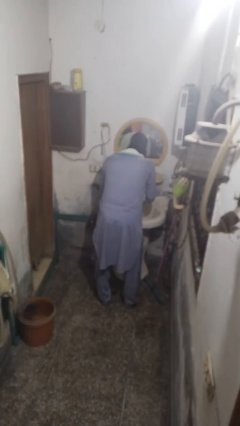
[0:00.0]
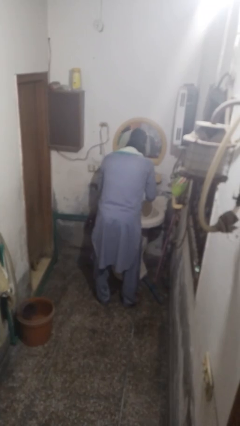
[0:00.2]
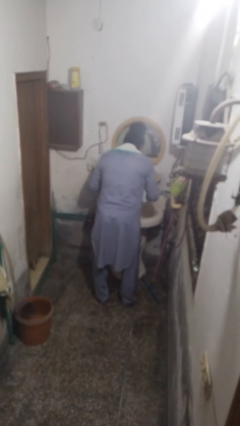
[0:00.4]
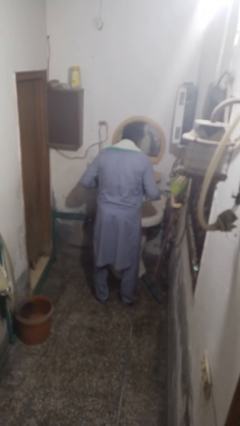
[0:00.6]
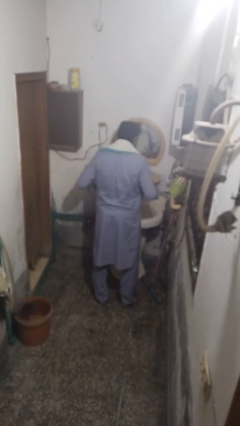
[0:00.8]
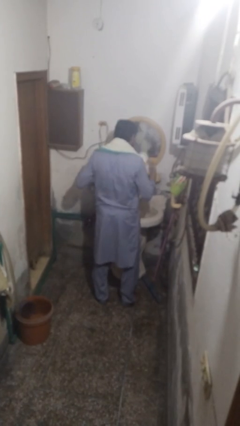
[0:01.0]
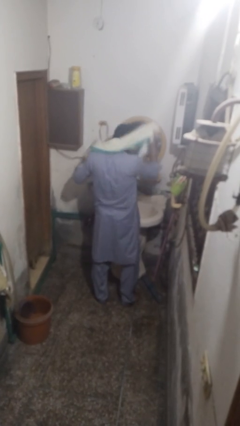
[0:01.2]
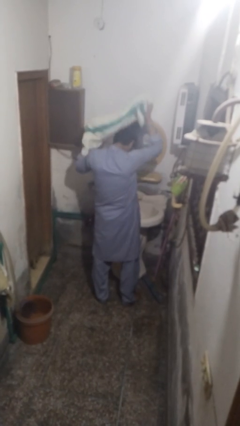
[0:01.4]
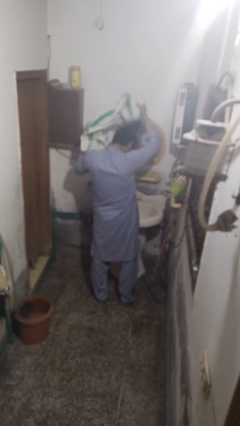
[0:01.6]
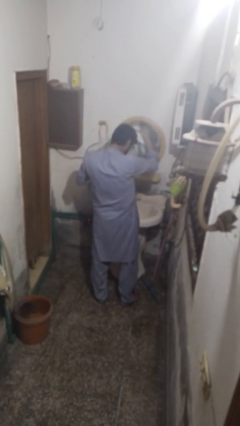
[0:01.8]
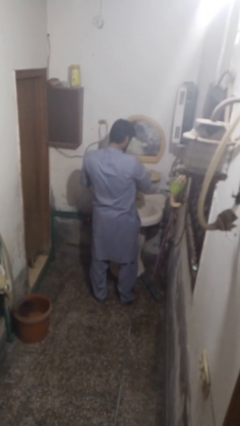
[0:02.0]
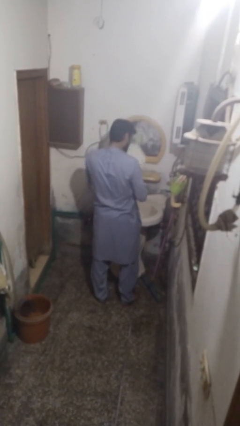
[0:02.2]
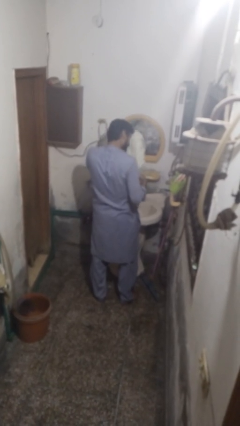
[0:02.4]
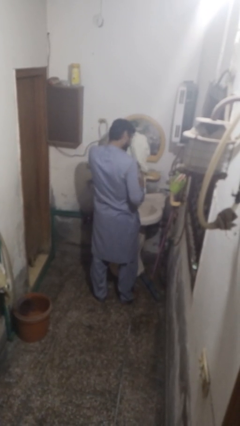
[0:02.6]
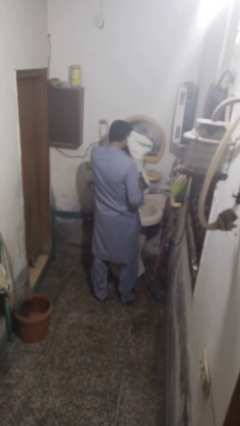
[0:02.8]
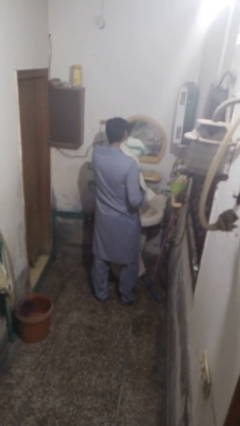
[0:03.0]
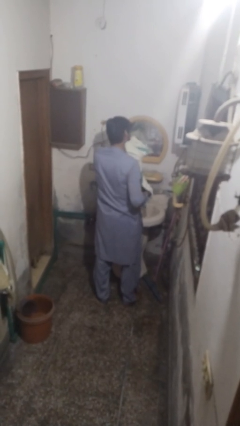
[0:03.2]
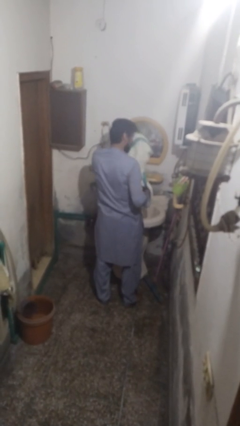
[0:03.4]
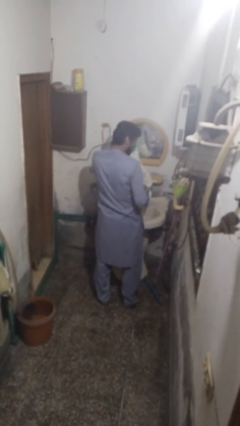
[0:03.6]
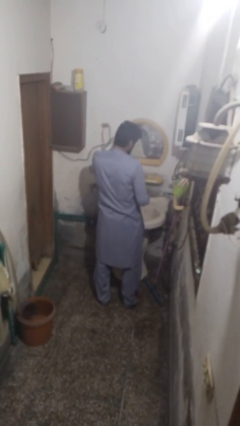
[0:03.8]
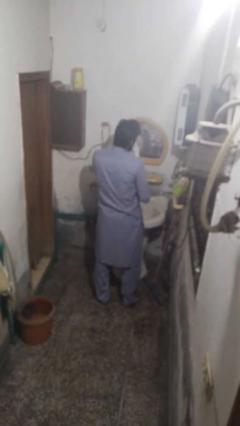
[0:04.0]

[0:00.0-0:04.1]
person dries face with towel

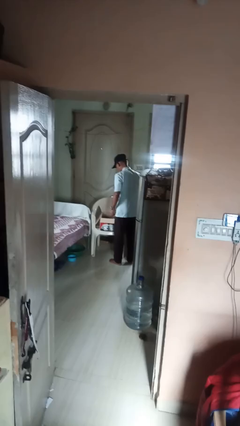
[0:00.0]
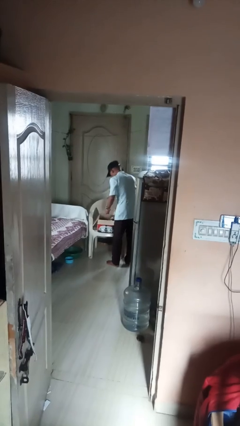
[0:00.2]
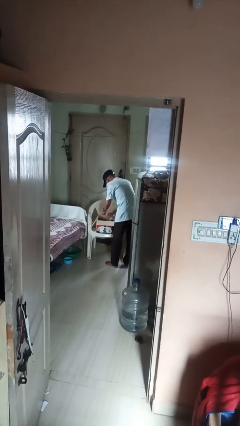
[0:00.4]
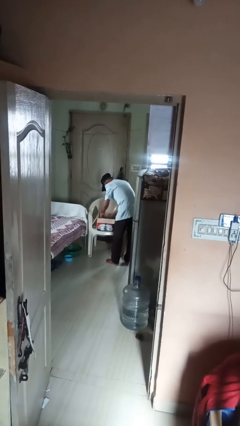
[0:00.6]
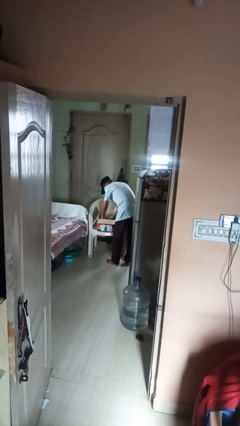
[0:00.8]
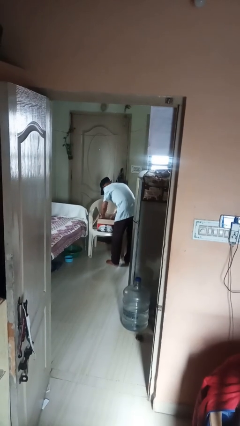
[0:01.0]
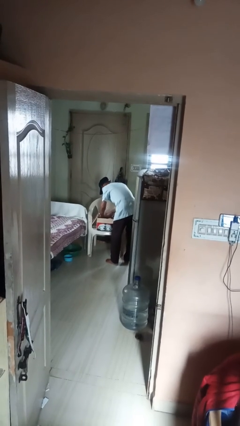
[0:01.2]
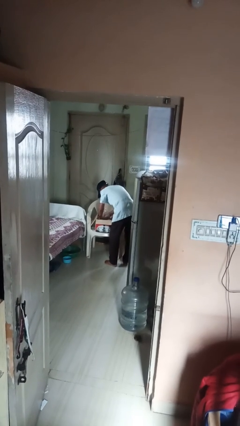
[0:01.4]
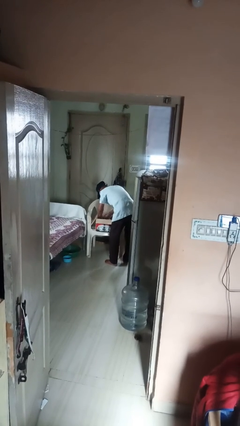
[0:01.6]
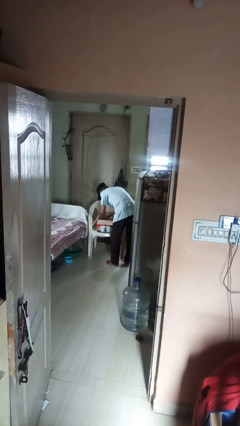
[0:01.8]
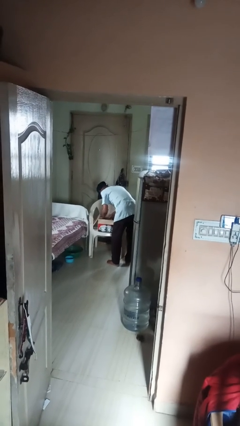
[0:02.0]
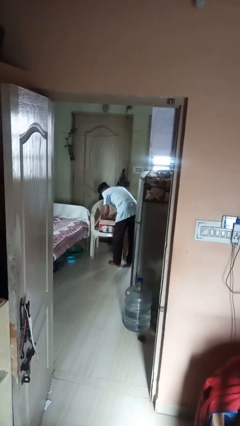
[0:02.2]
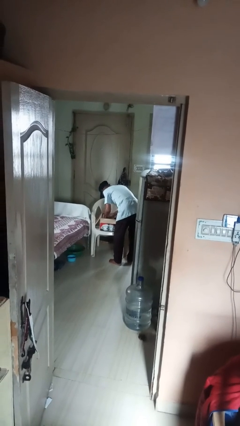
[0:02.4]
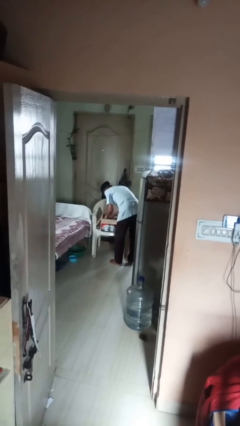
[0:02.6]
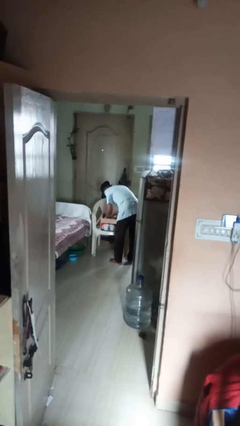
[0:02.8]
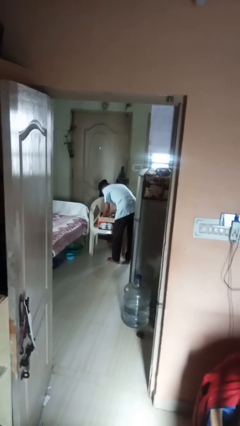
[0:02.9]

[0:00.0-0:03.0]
person searches in box

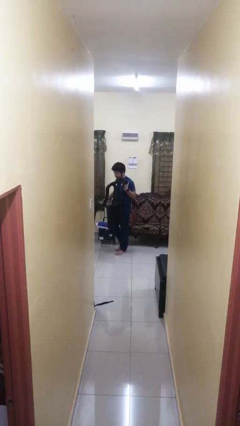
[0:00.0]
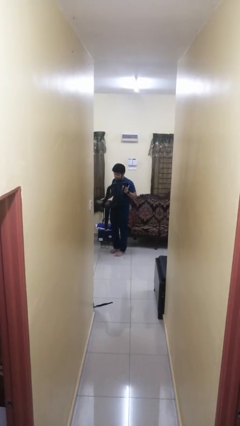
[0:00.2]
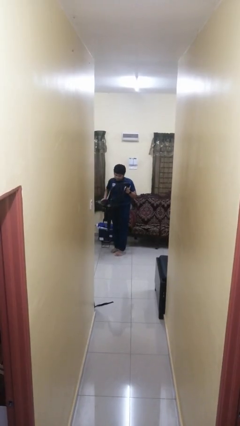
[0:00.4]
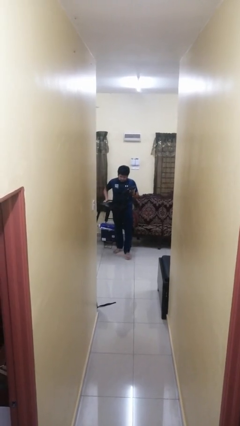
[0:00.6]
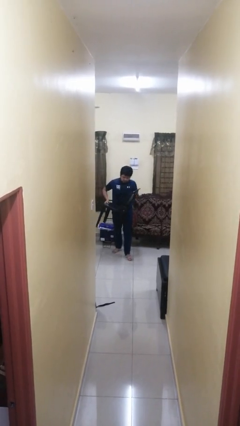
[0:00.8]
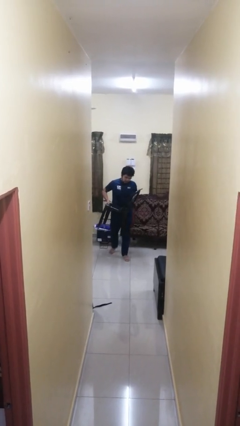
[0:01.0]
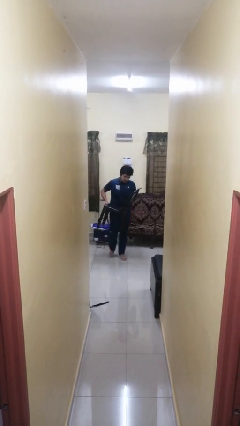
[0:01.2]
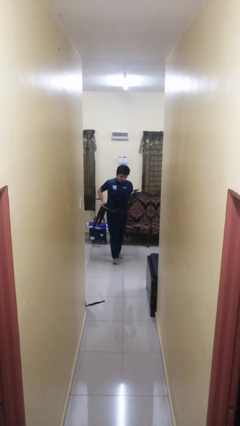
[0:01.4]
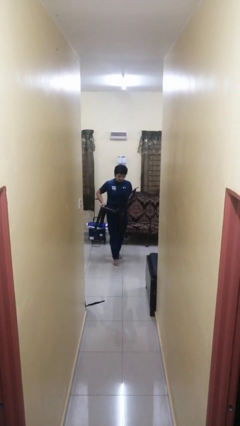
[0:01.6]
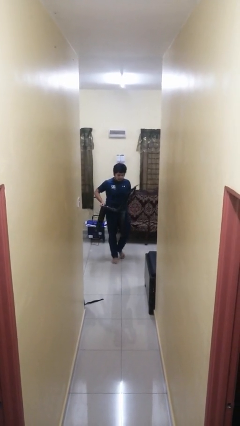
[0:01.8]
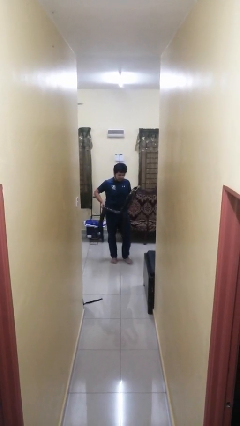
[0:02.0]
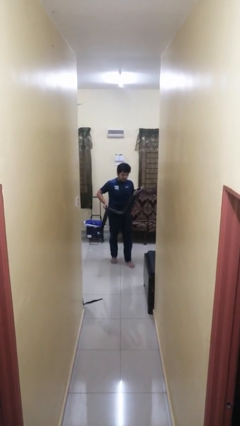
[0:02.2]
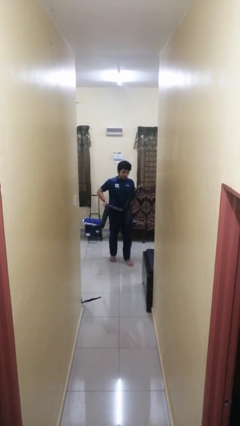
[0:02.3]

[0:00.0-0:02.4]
person carries furniture

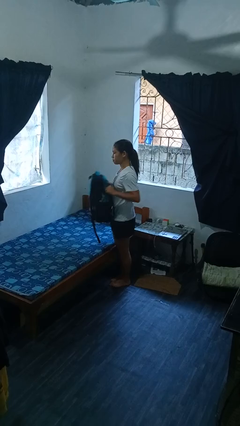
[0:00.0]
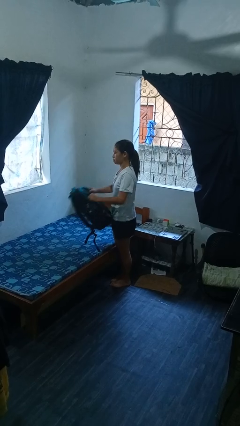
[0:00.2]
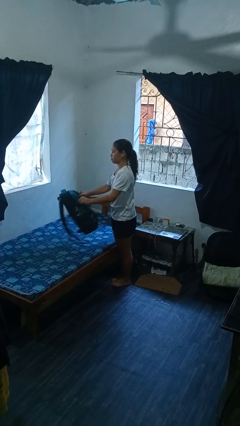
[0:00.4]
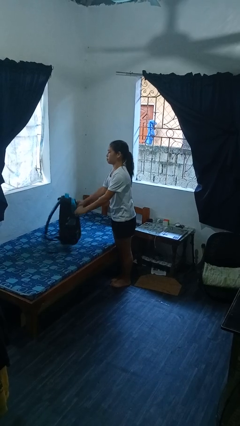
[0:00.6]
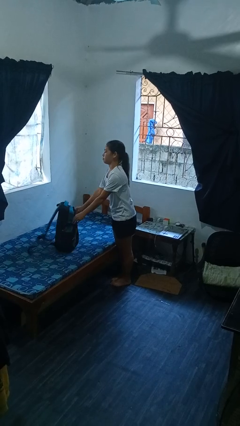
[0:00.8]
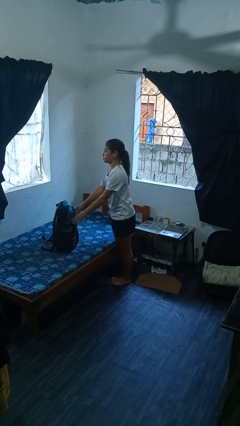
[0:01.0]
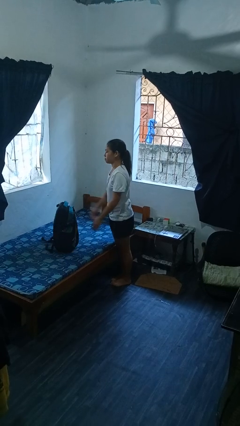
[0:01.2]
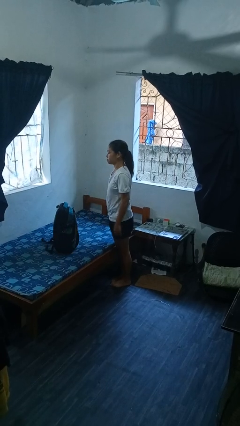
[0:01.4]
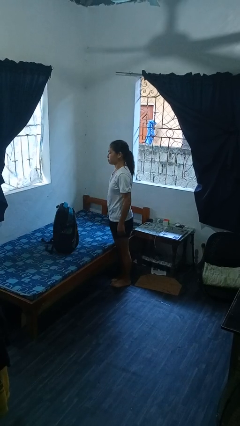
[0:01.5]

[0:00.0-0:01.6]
person puts down object on bed

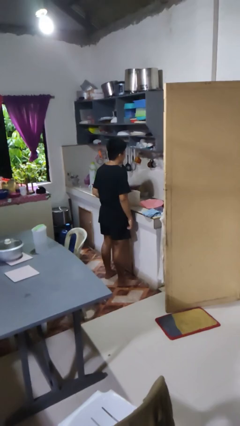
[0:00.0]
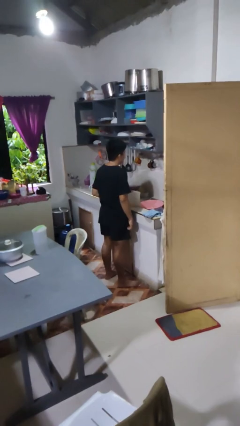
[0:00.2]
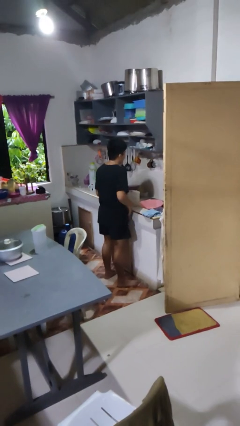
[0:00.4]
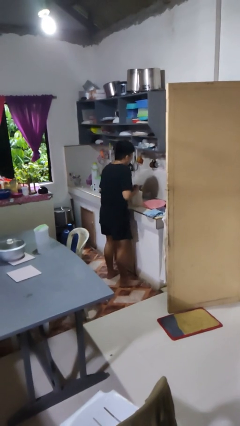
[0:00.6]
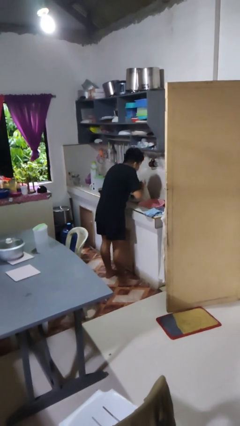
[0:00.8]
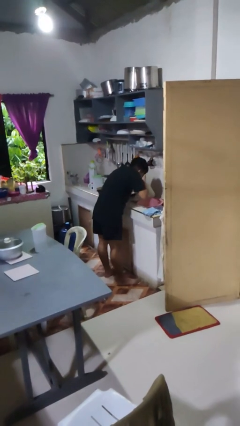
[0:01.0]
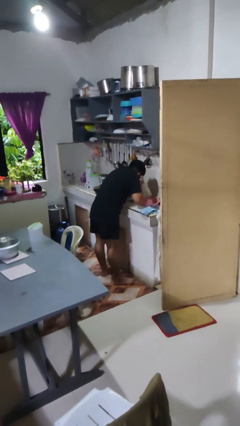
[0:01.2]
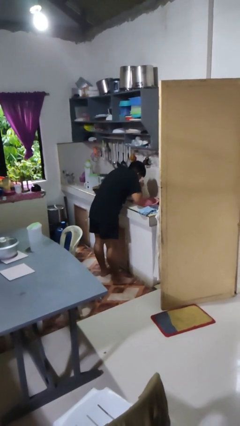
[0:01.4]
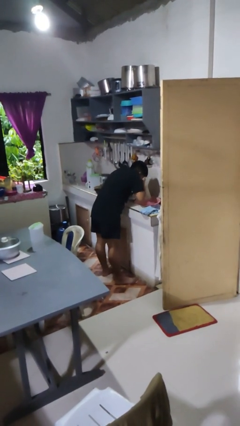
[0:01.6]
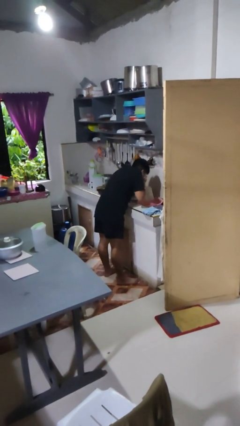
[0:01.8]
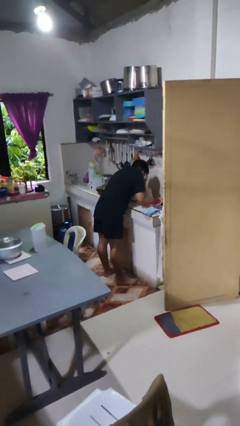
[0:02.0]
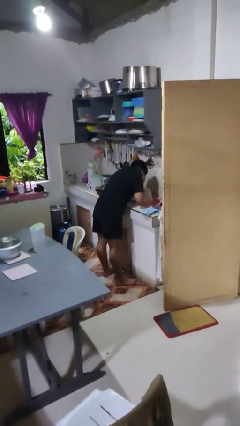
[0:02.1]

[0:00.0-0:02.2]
person washes face

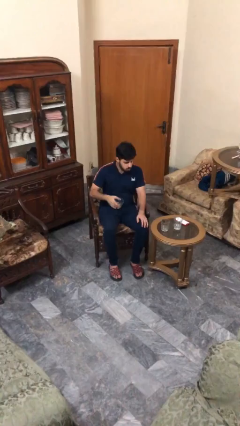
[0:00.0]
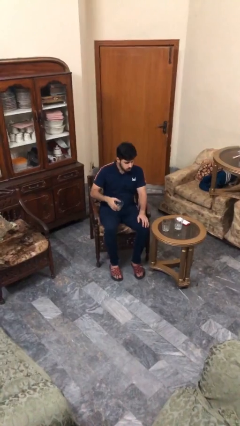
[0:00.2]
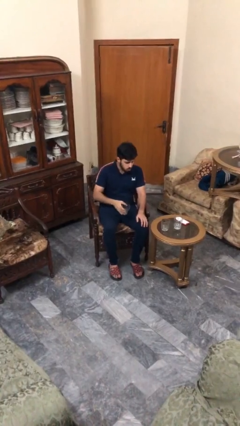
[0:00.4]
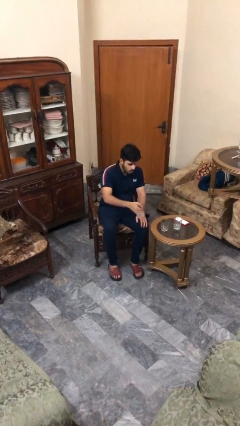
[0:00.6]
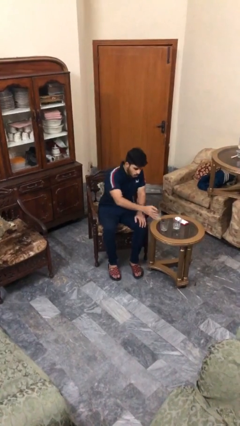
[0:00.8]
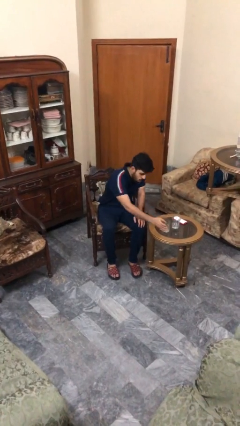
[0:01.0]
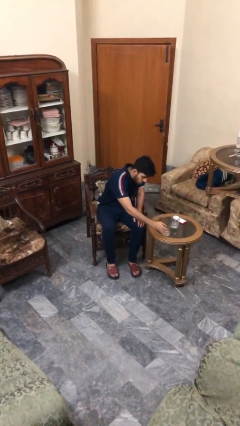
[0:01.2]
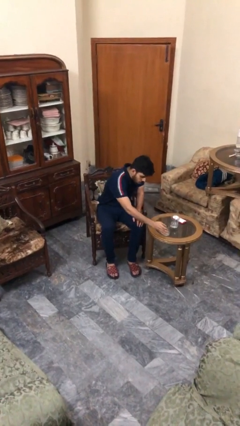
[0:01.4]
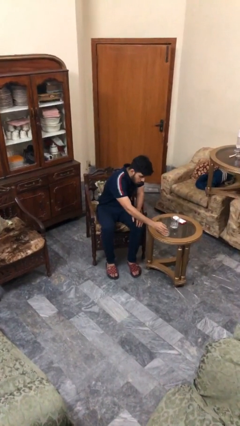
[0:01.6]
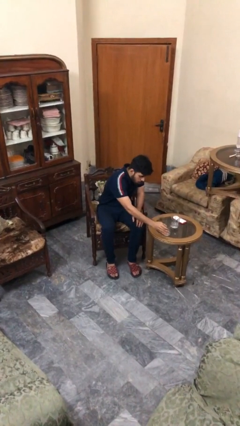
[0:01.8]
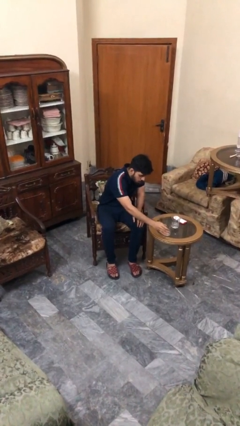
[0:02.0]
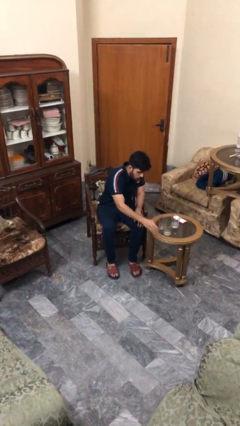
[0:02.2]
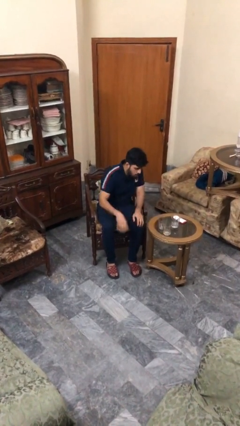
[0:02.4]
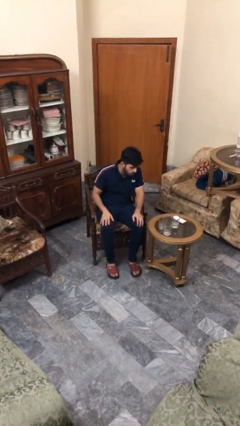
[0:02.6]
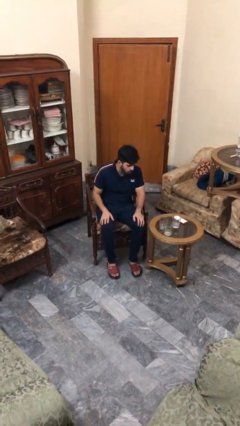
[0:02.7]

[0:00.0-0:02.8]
person puts down object on table

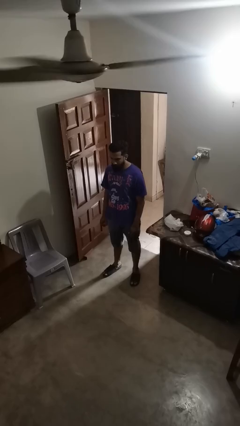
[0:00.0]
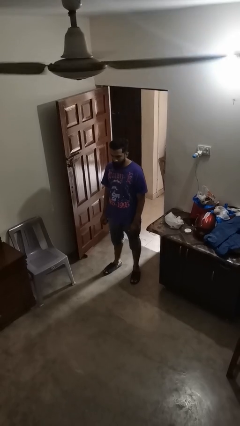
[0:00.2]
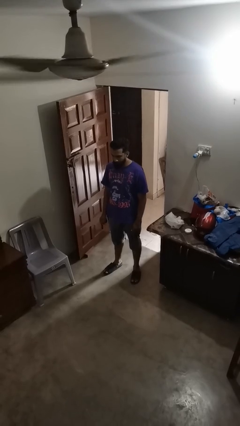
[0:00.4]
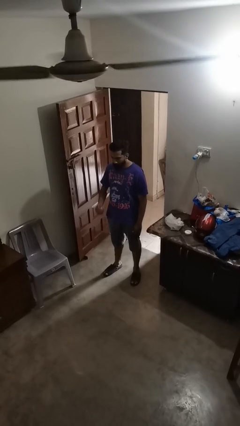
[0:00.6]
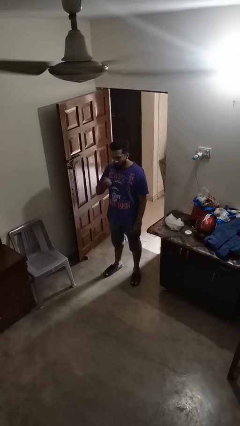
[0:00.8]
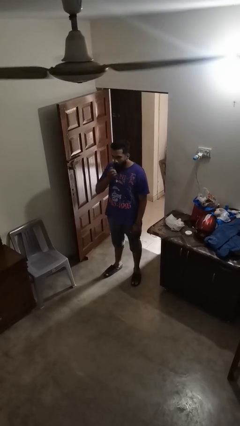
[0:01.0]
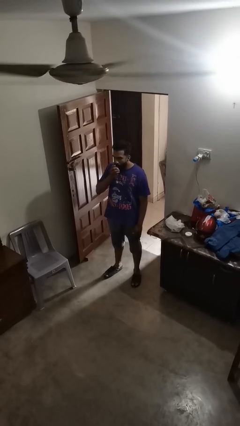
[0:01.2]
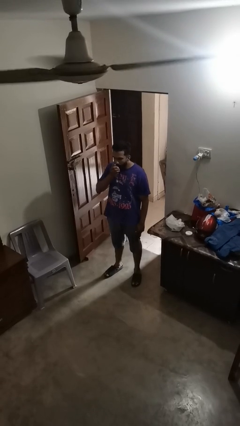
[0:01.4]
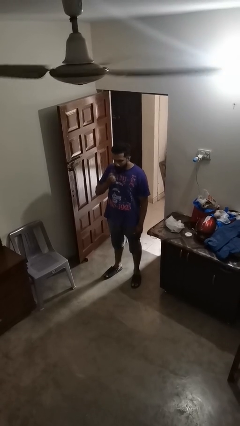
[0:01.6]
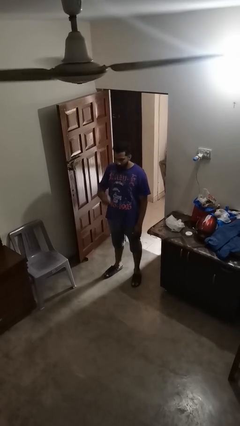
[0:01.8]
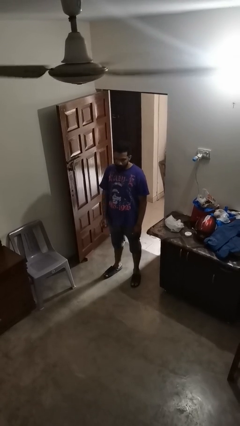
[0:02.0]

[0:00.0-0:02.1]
person eats apple
